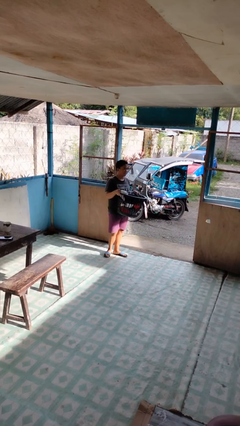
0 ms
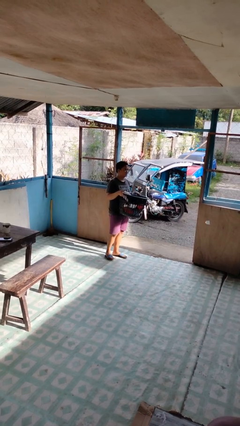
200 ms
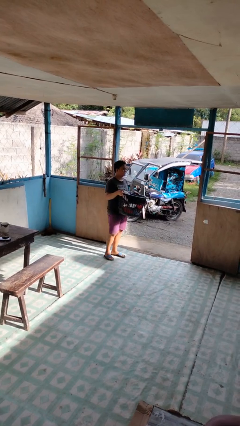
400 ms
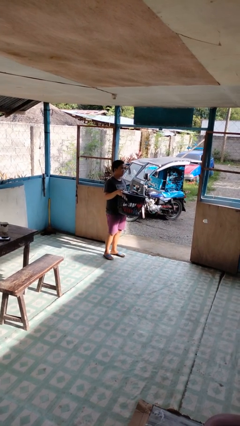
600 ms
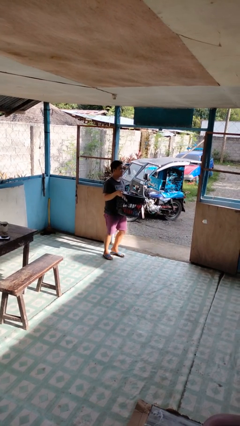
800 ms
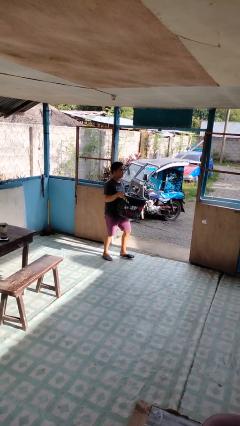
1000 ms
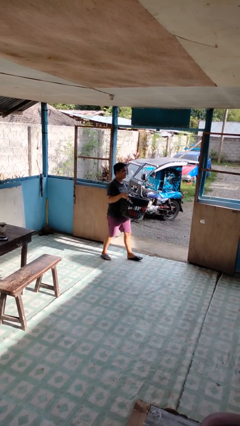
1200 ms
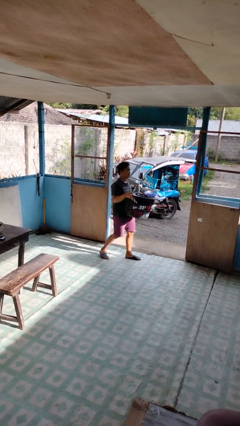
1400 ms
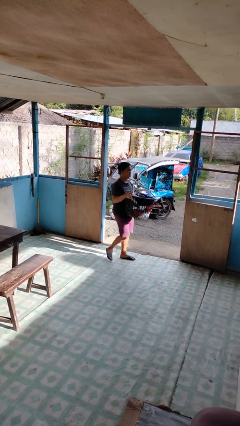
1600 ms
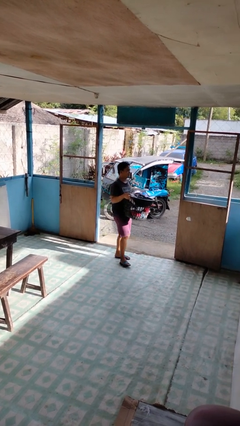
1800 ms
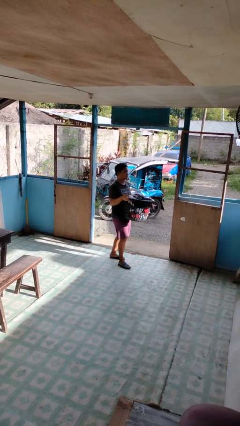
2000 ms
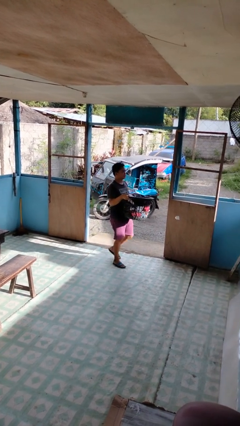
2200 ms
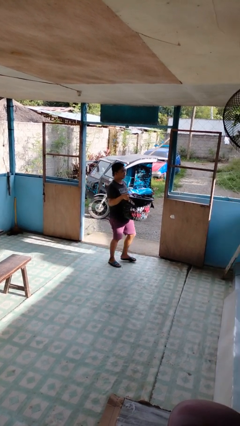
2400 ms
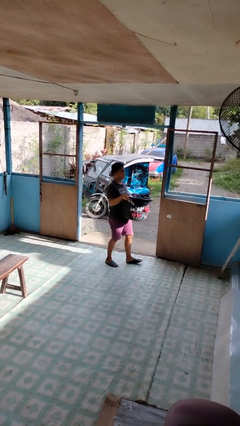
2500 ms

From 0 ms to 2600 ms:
person carries laundry basket

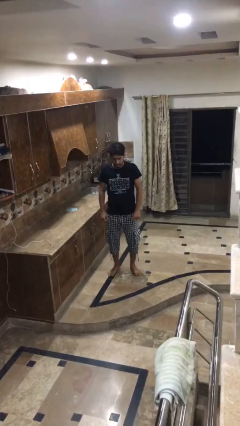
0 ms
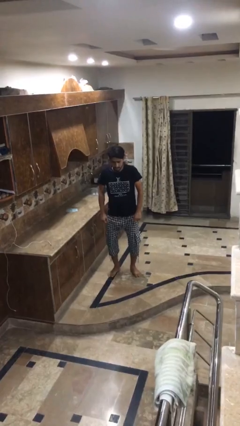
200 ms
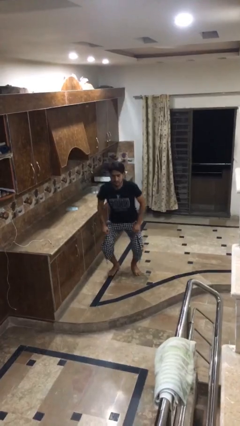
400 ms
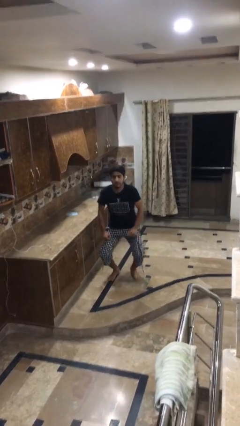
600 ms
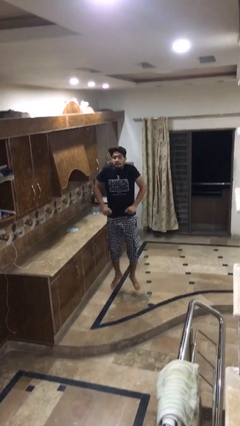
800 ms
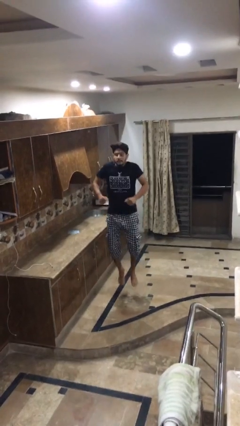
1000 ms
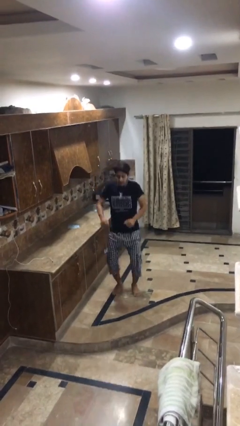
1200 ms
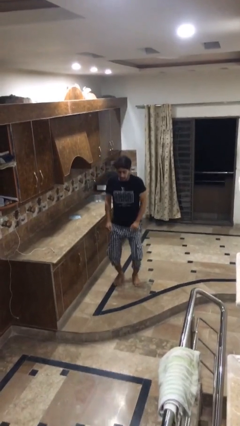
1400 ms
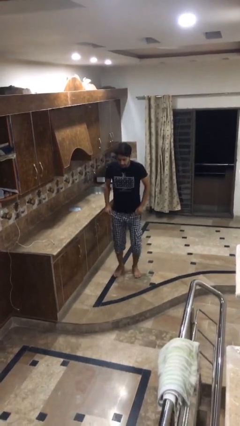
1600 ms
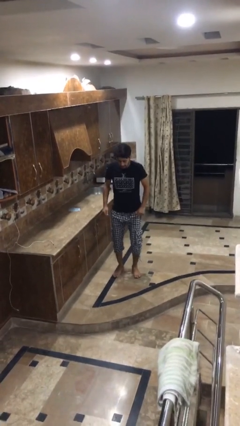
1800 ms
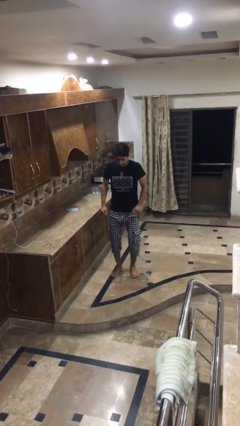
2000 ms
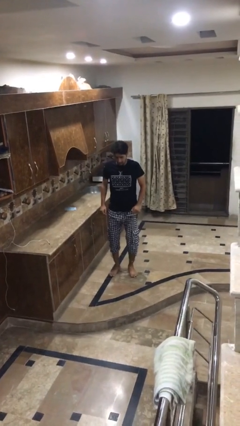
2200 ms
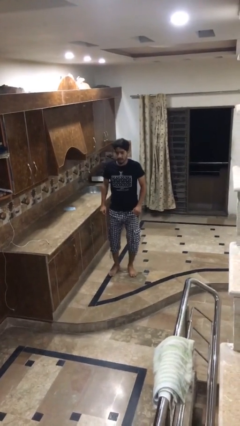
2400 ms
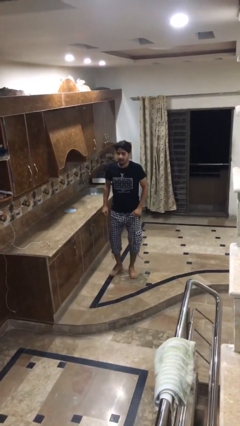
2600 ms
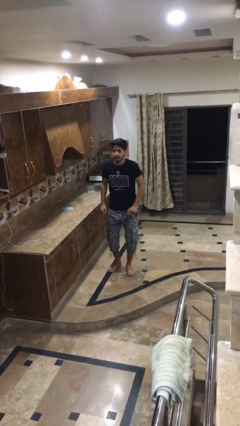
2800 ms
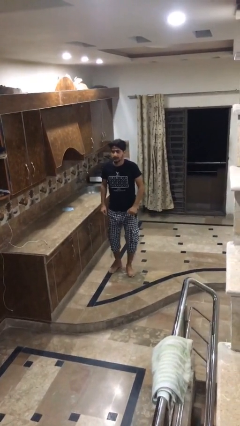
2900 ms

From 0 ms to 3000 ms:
person jumps

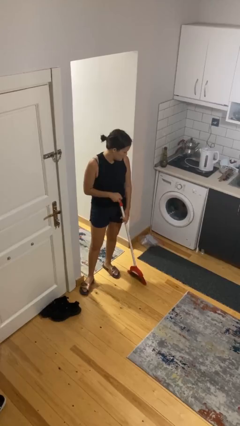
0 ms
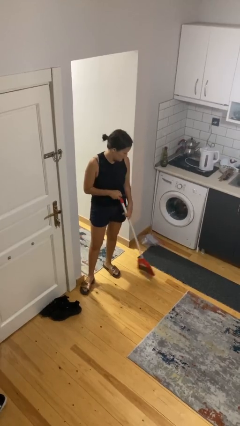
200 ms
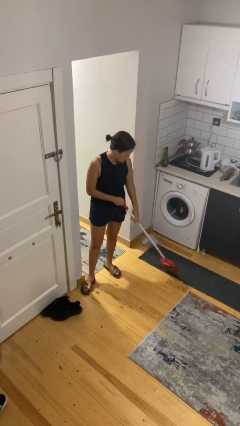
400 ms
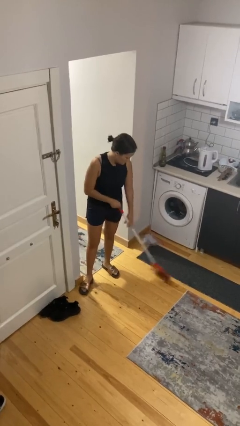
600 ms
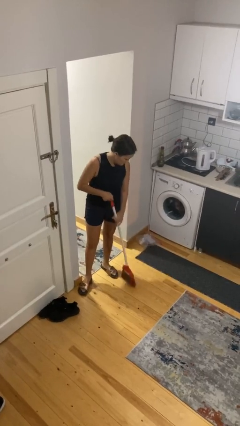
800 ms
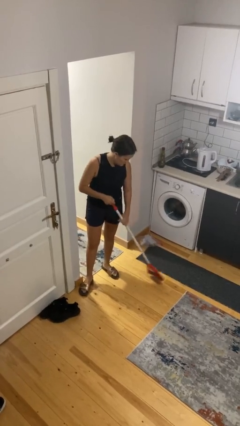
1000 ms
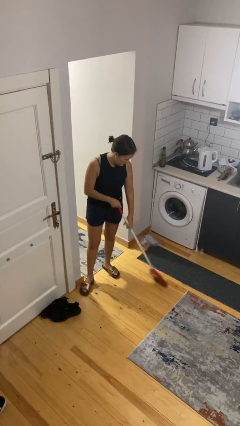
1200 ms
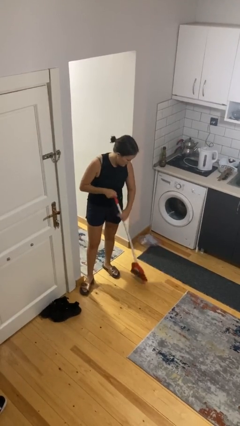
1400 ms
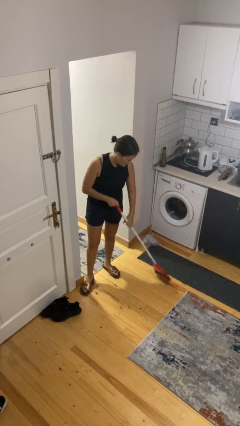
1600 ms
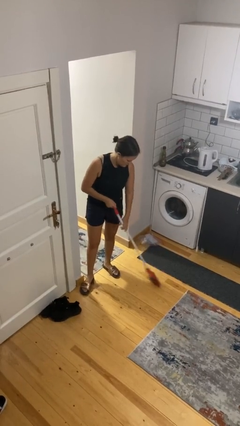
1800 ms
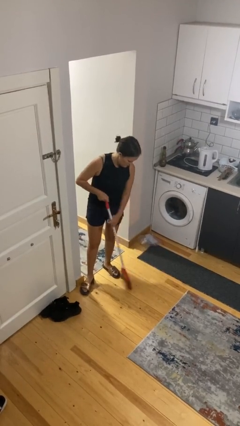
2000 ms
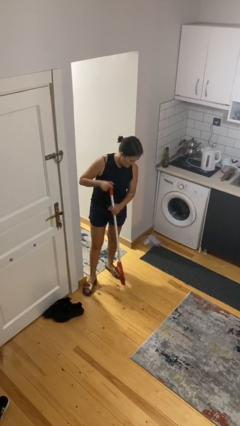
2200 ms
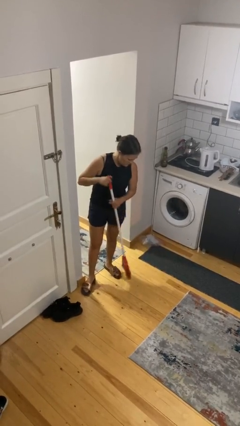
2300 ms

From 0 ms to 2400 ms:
person sweeps floor

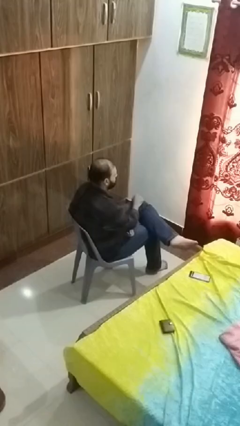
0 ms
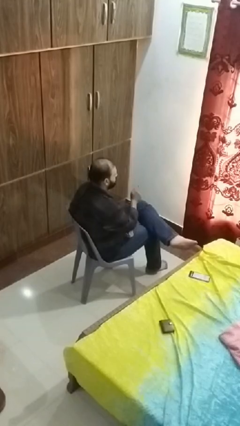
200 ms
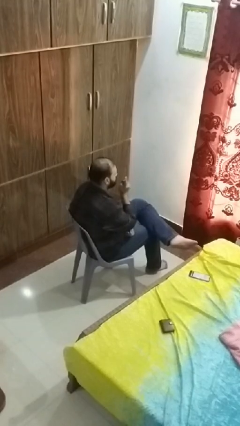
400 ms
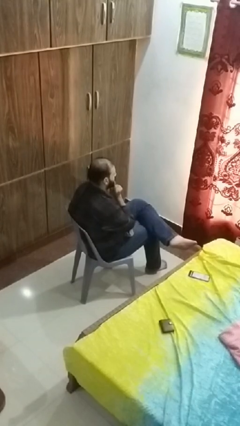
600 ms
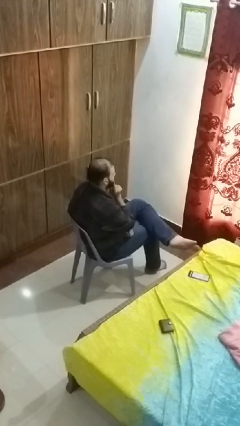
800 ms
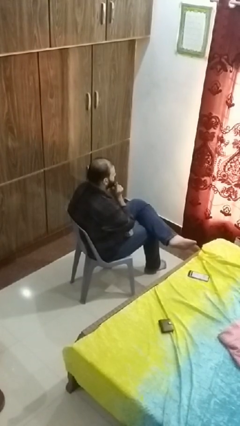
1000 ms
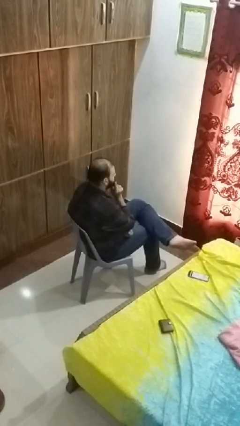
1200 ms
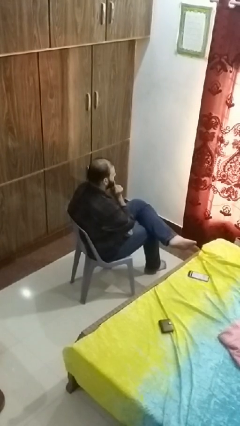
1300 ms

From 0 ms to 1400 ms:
person strokes chin

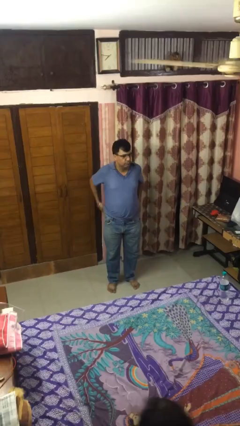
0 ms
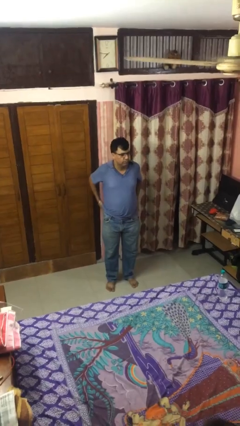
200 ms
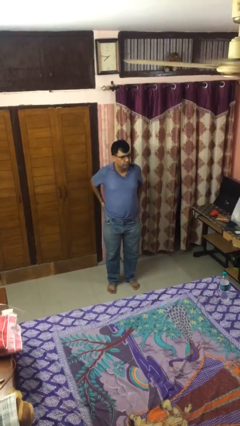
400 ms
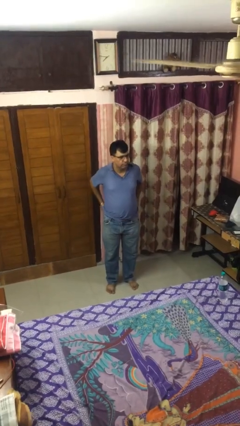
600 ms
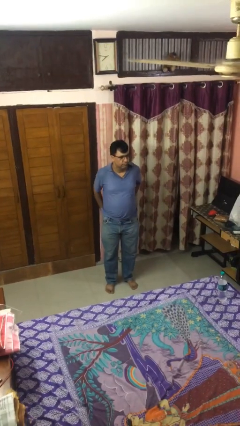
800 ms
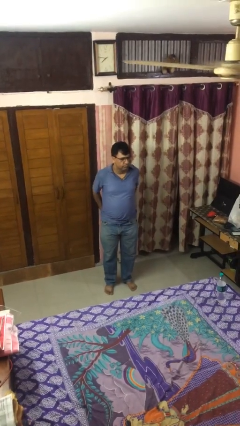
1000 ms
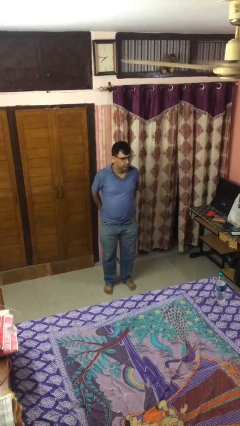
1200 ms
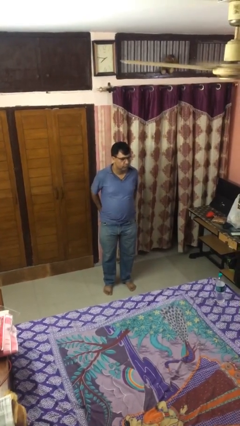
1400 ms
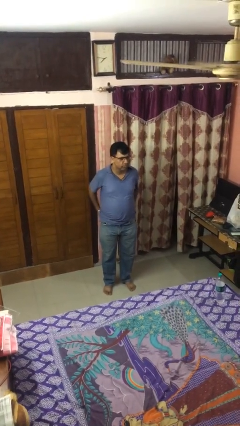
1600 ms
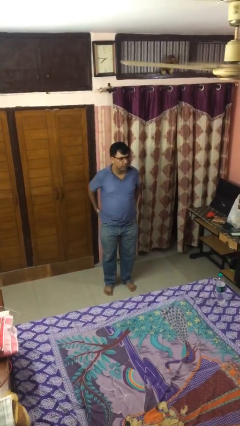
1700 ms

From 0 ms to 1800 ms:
person puts hands in back pockets

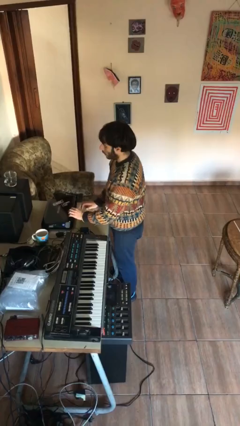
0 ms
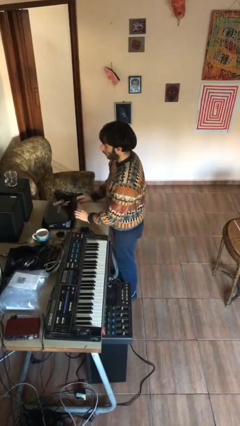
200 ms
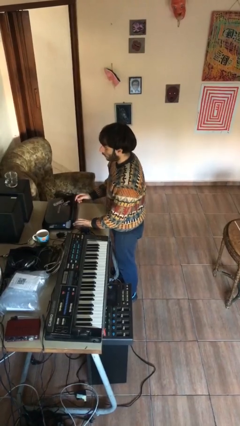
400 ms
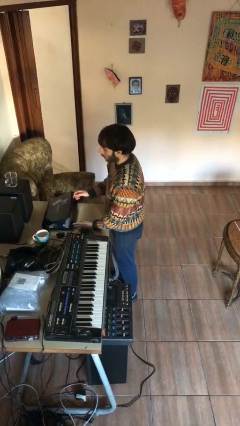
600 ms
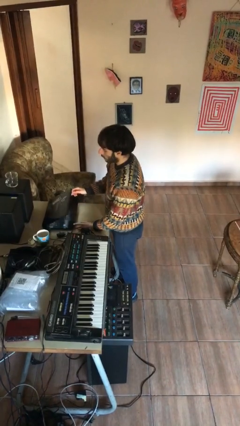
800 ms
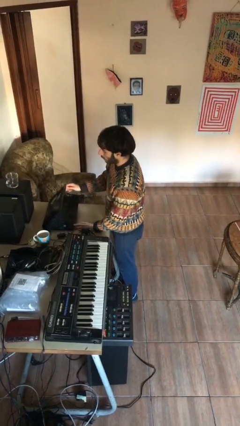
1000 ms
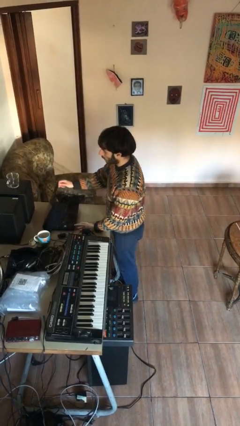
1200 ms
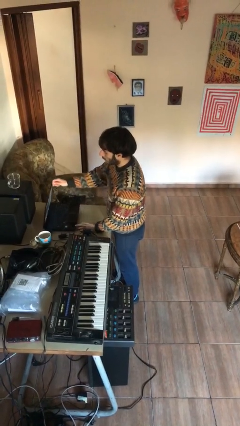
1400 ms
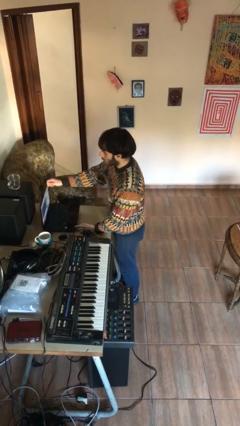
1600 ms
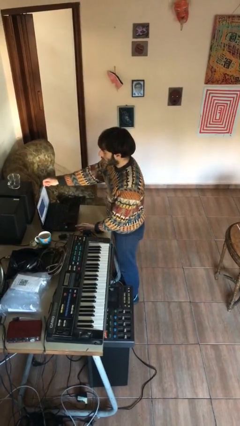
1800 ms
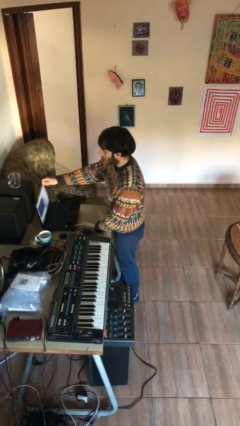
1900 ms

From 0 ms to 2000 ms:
person opens laptop

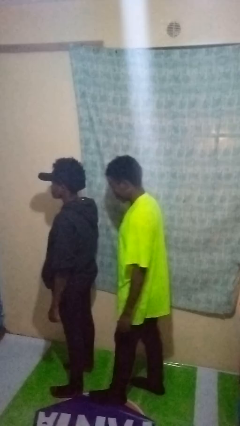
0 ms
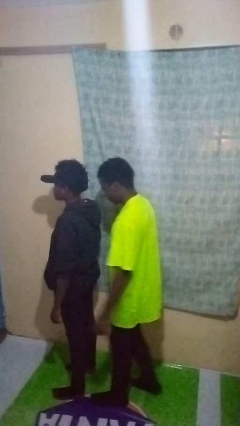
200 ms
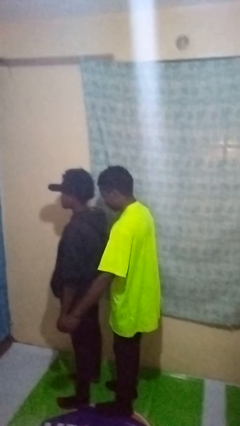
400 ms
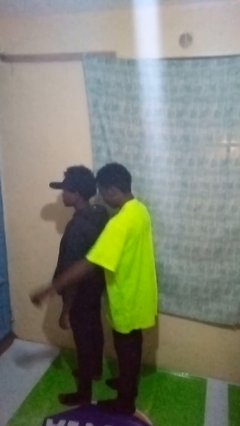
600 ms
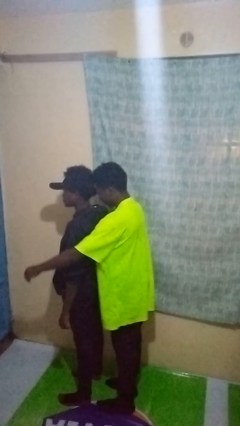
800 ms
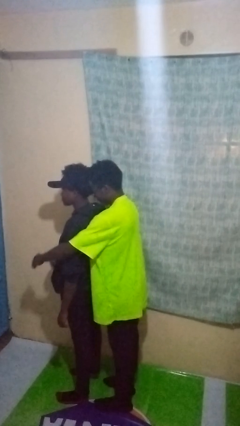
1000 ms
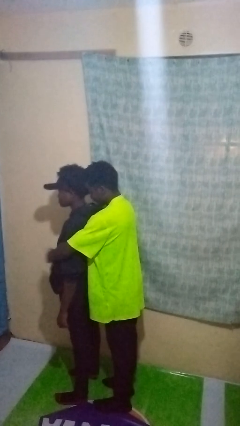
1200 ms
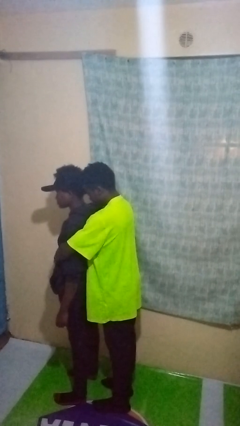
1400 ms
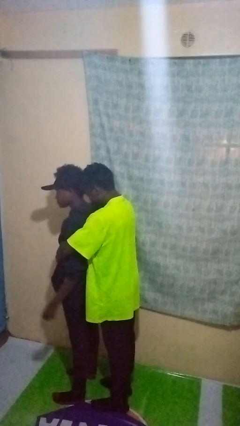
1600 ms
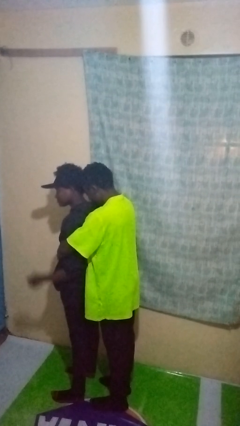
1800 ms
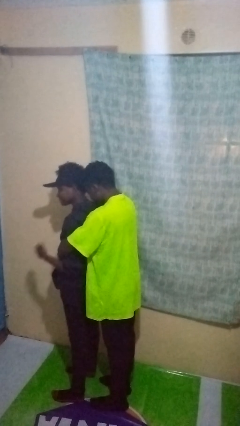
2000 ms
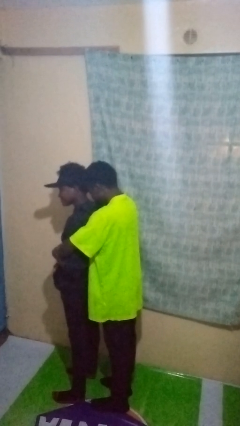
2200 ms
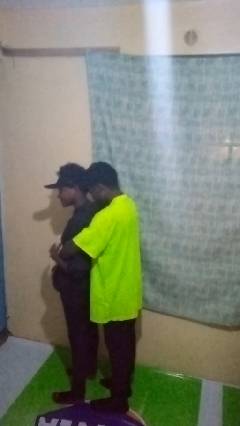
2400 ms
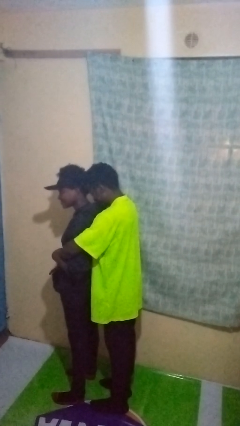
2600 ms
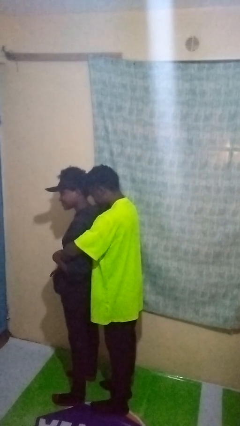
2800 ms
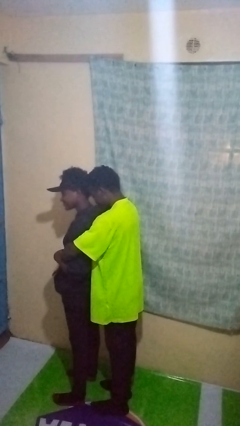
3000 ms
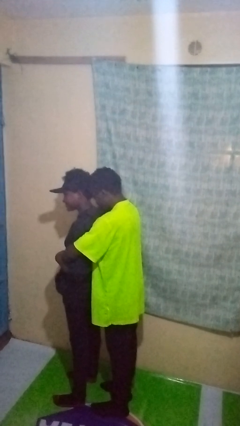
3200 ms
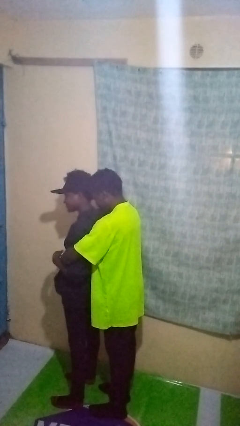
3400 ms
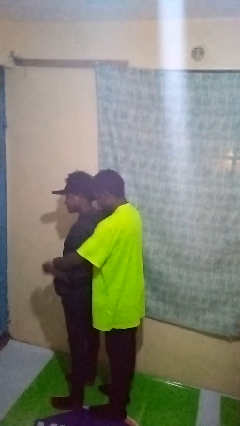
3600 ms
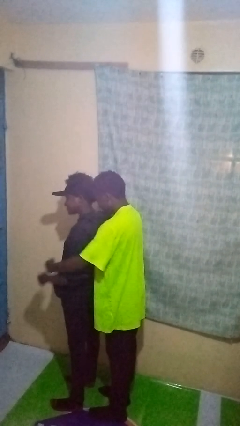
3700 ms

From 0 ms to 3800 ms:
person hugs person from behind
